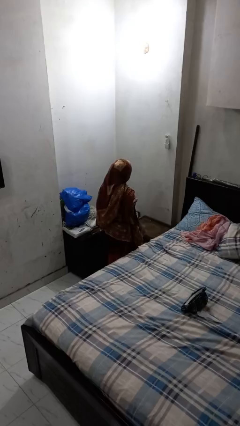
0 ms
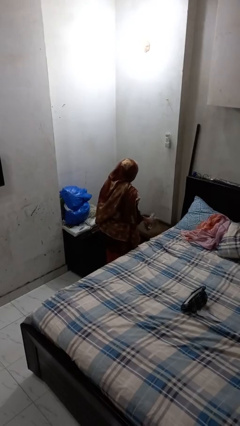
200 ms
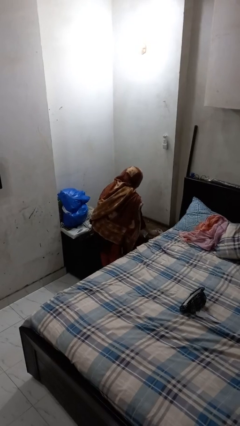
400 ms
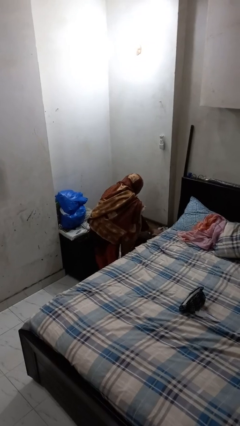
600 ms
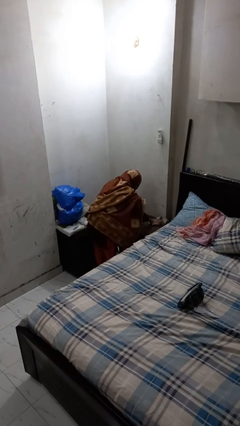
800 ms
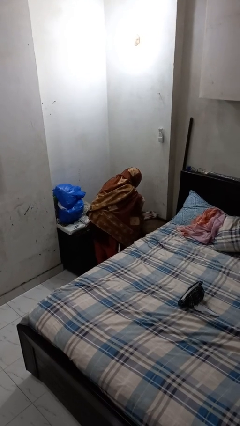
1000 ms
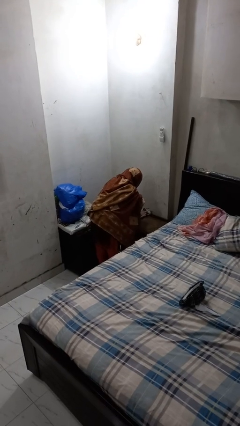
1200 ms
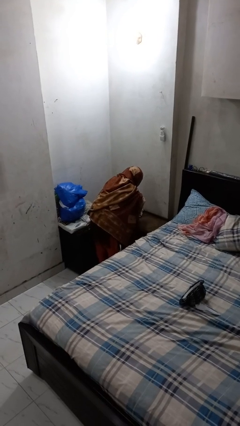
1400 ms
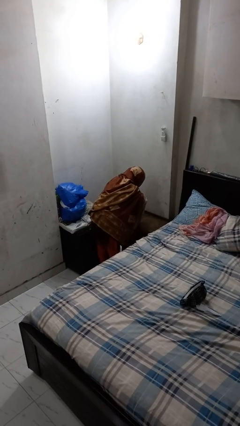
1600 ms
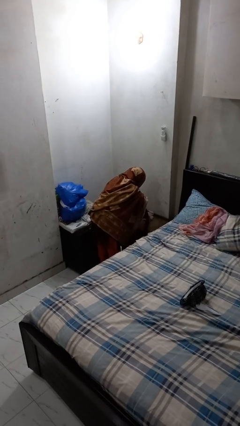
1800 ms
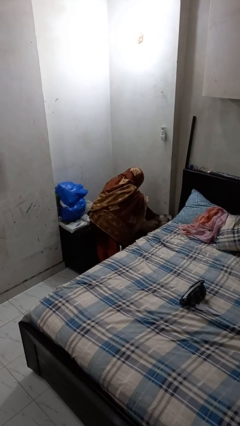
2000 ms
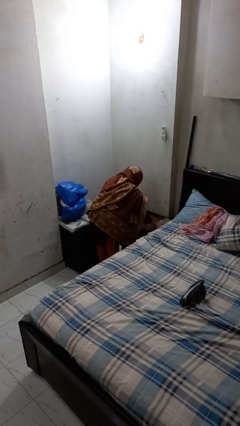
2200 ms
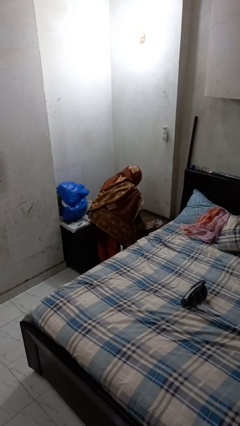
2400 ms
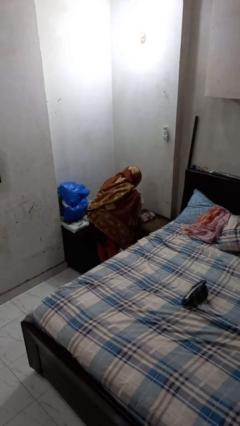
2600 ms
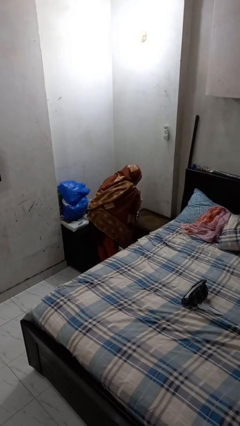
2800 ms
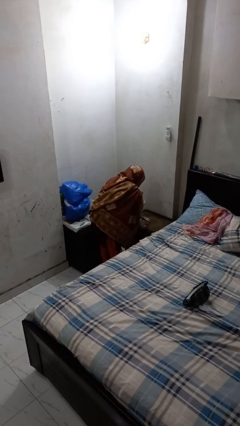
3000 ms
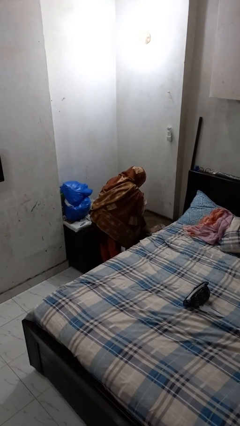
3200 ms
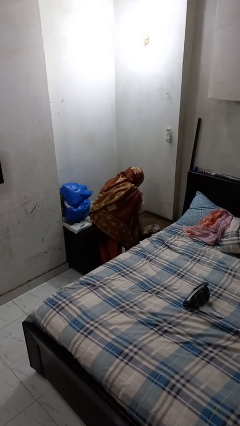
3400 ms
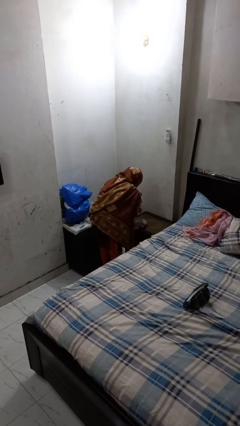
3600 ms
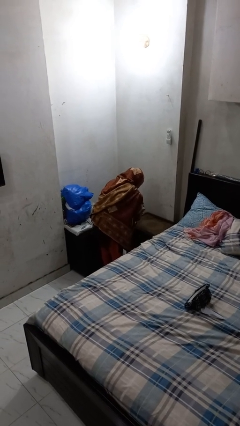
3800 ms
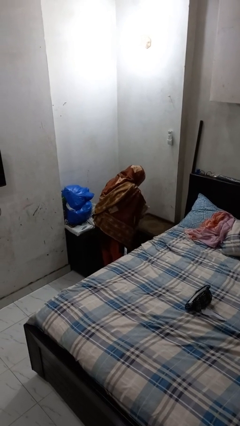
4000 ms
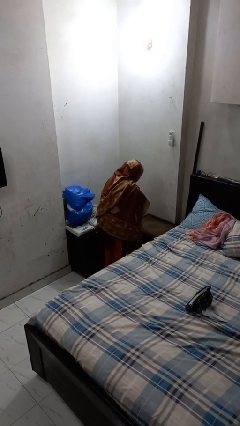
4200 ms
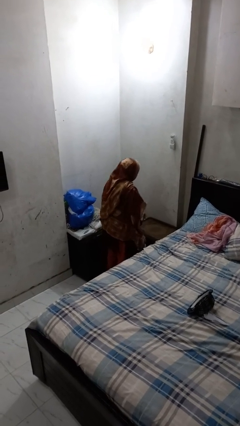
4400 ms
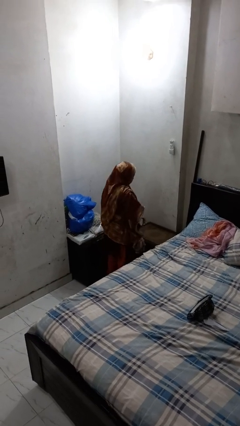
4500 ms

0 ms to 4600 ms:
person cleans table with rag

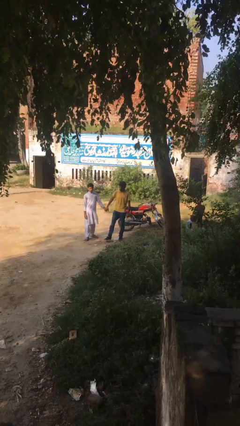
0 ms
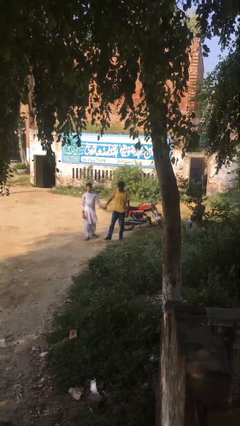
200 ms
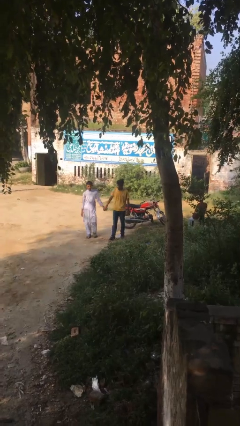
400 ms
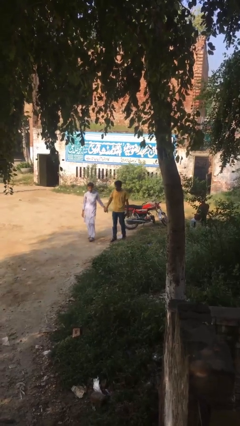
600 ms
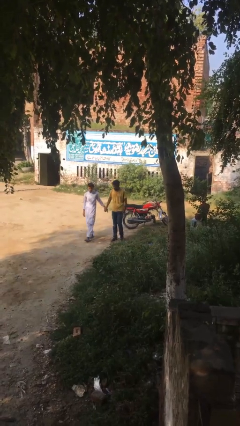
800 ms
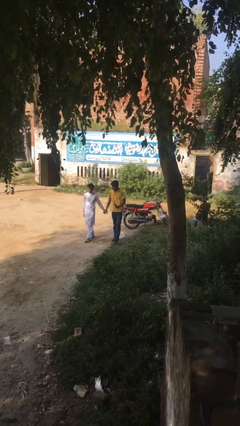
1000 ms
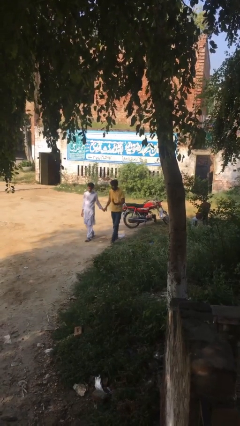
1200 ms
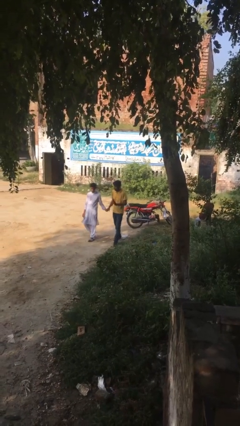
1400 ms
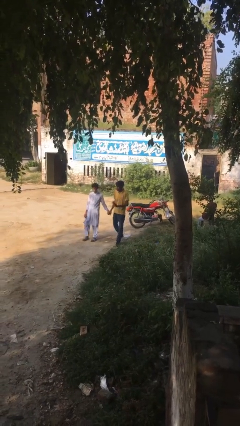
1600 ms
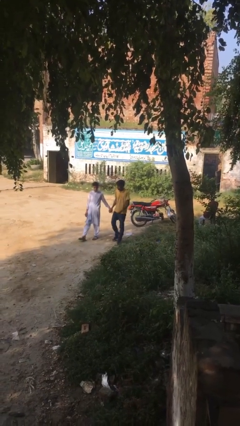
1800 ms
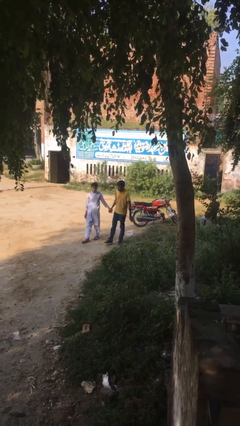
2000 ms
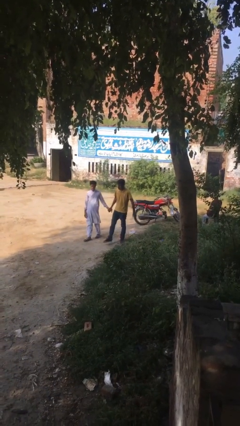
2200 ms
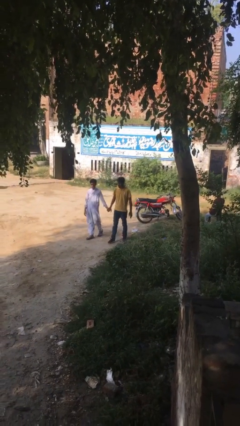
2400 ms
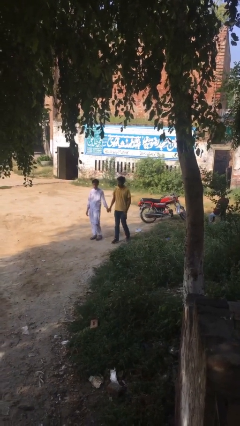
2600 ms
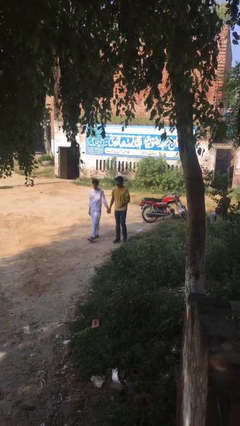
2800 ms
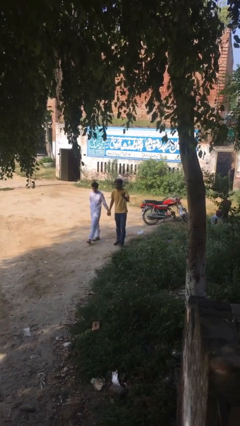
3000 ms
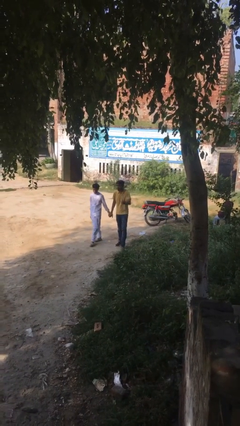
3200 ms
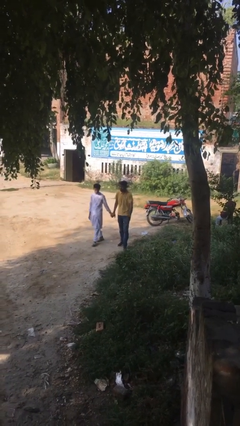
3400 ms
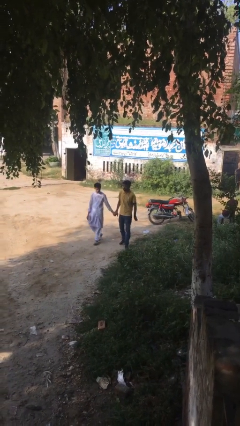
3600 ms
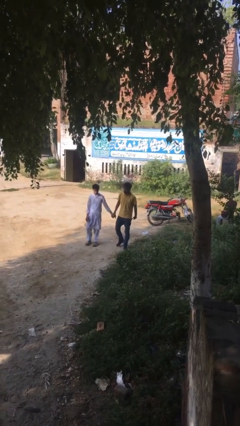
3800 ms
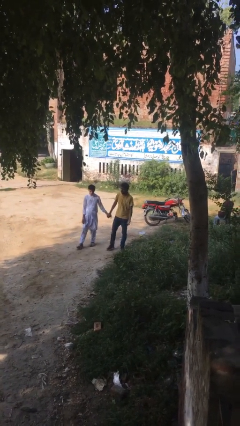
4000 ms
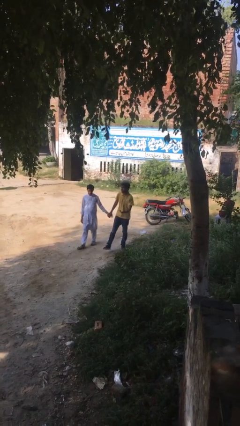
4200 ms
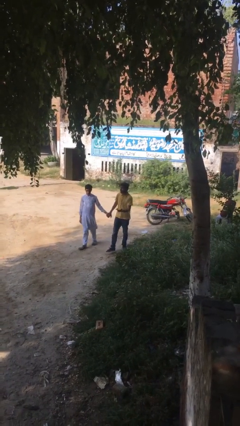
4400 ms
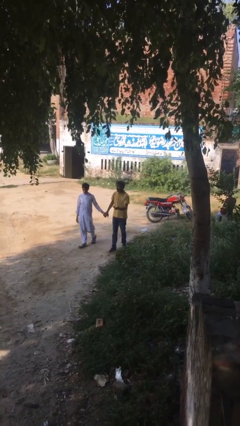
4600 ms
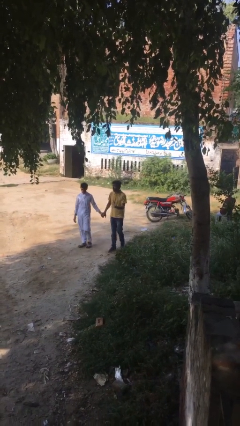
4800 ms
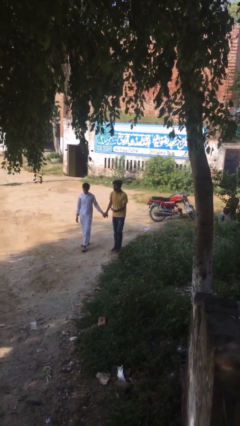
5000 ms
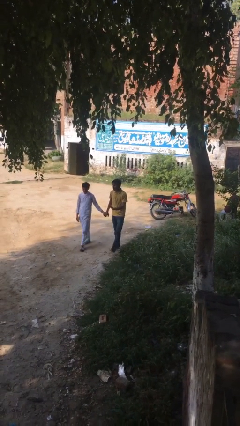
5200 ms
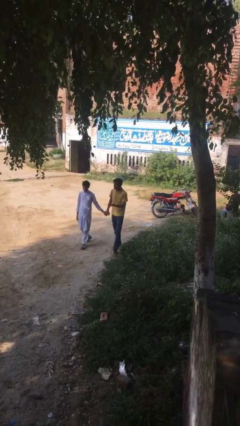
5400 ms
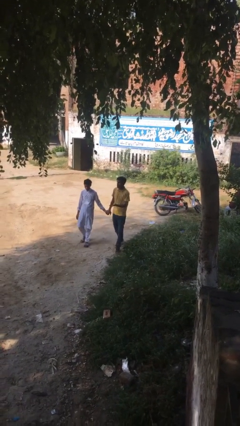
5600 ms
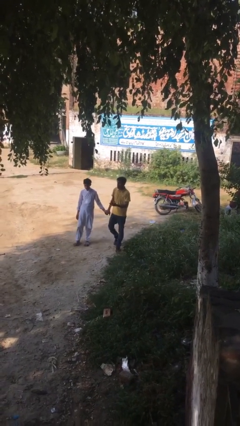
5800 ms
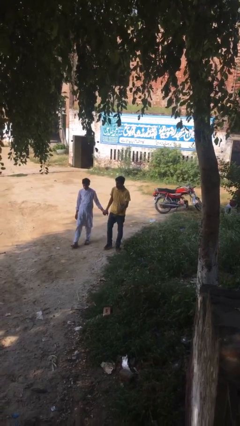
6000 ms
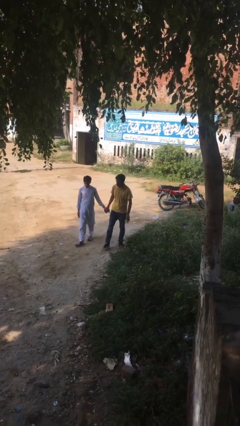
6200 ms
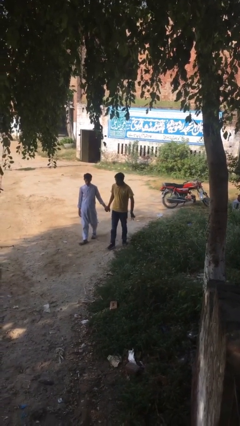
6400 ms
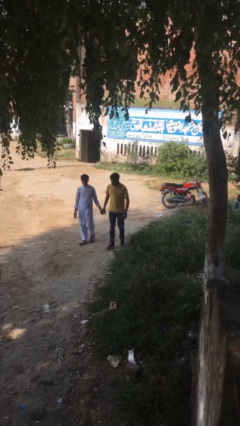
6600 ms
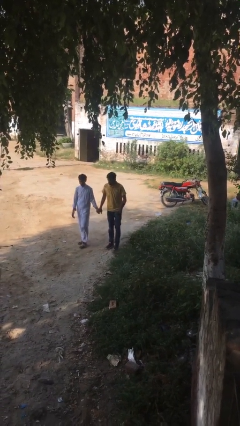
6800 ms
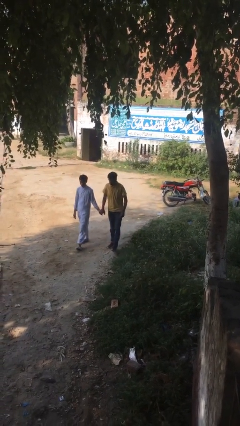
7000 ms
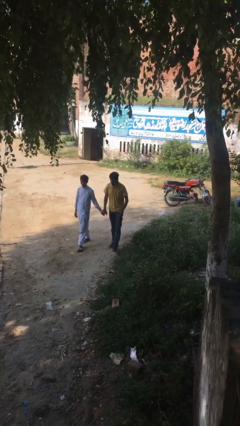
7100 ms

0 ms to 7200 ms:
person holds hand

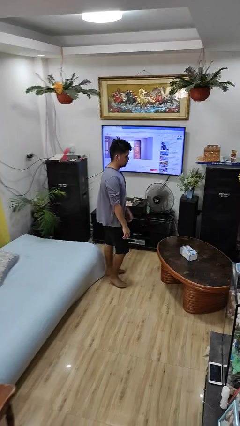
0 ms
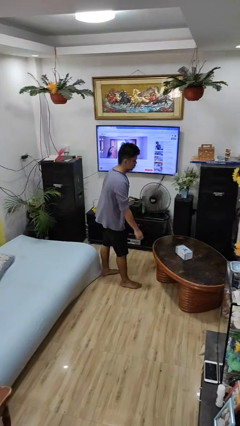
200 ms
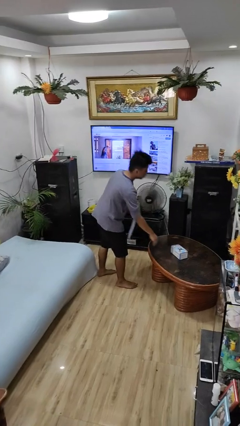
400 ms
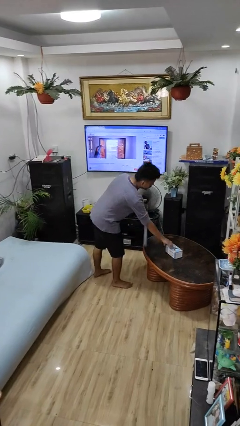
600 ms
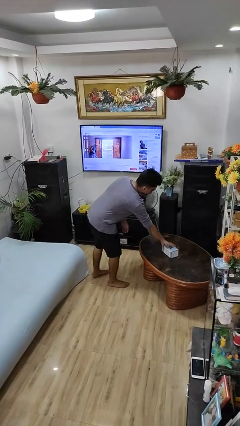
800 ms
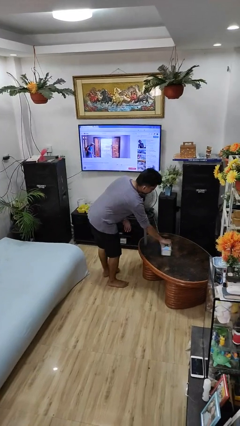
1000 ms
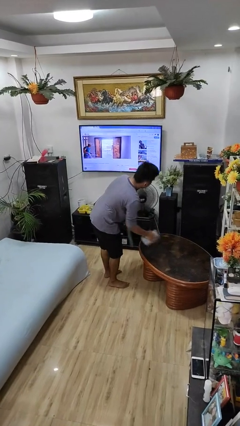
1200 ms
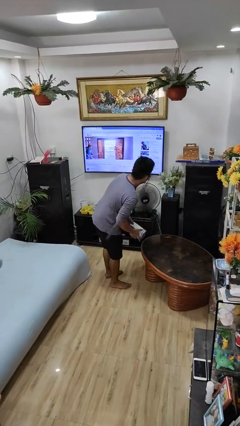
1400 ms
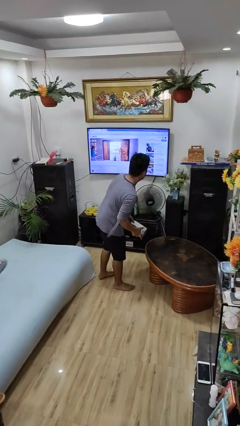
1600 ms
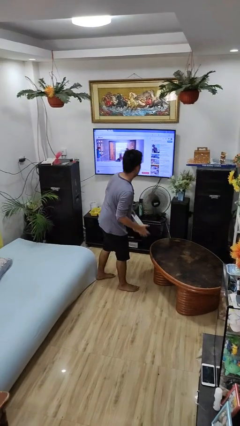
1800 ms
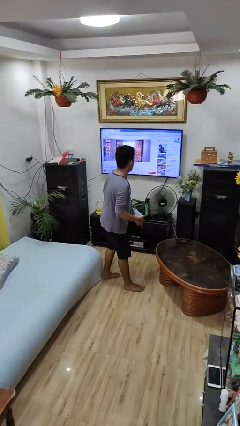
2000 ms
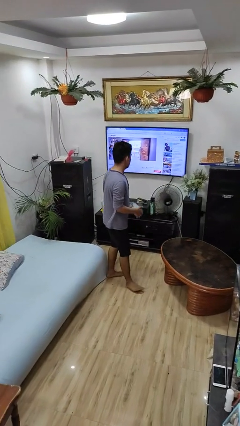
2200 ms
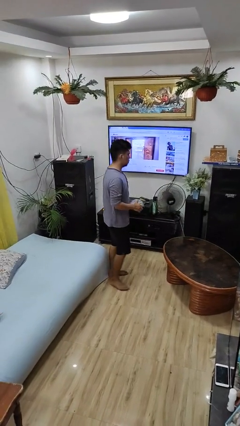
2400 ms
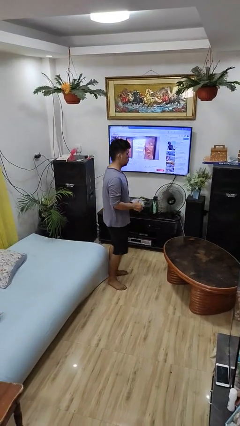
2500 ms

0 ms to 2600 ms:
person picks up object from table

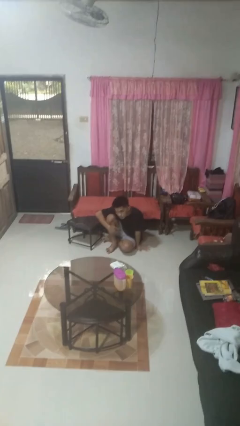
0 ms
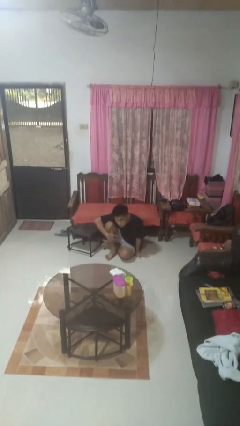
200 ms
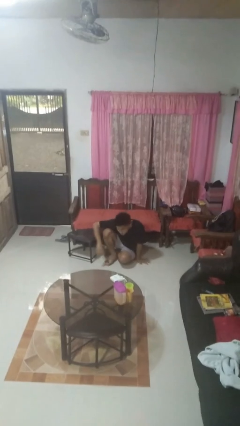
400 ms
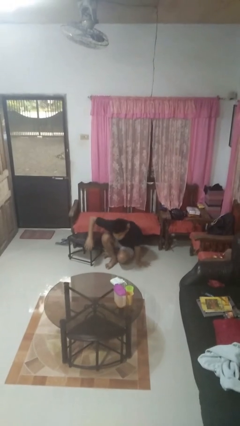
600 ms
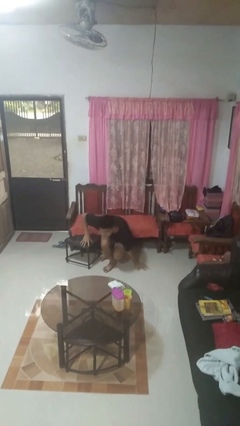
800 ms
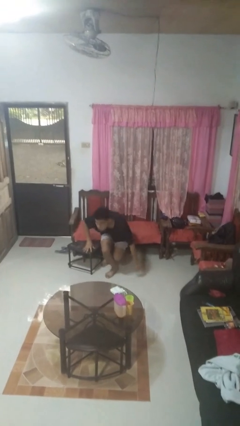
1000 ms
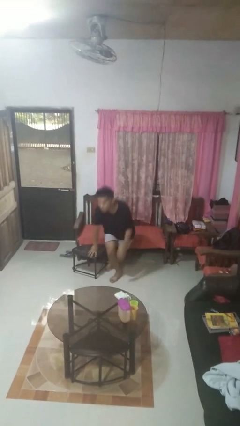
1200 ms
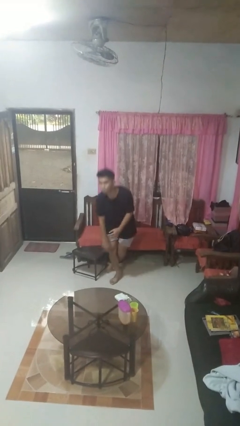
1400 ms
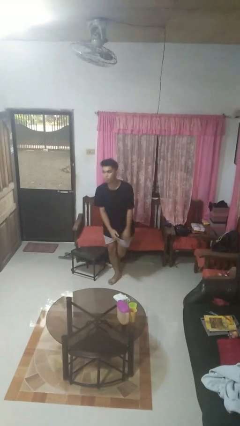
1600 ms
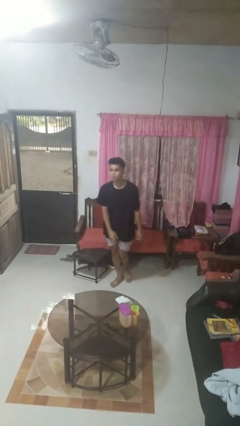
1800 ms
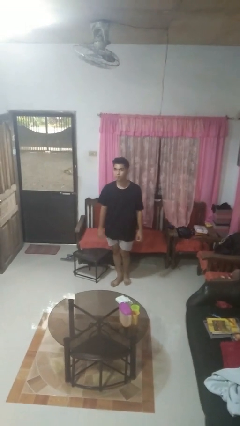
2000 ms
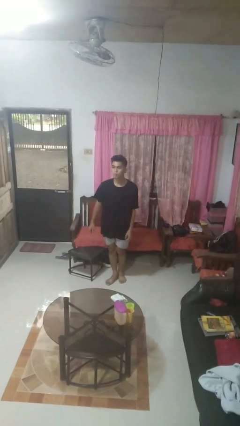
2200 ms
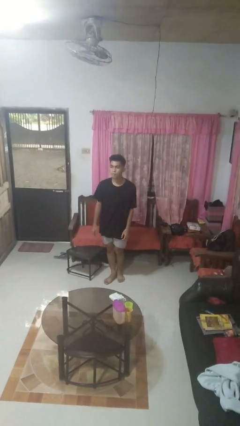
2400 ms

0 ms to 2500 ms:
person stands up from floor

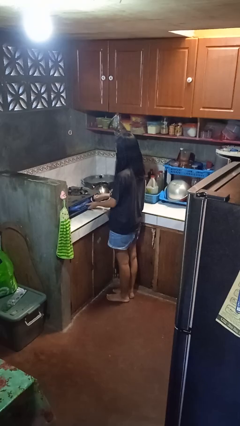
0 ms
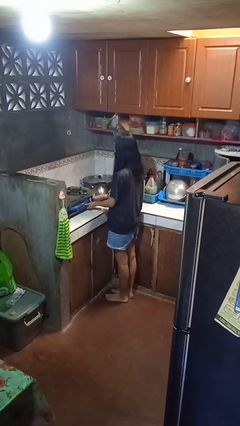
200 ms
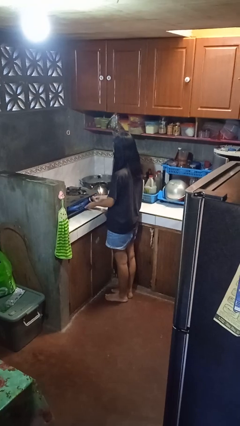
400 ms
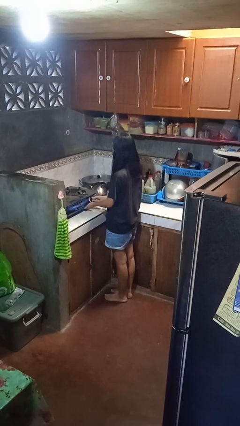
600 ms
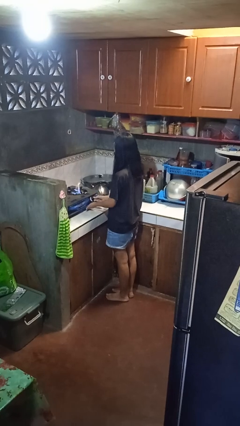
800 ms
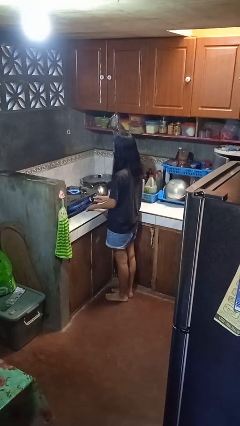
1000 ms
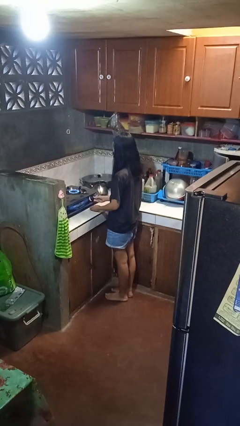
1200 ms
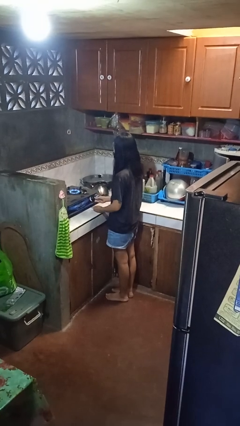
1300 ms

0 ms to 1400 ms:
person turns on stovetop
